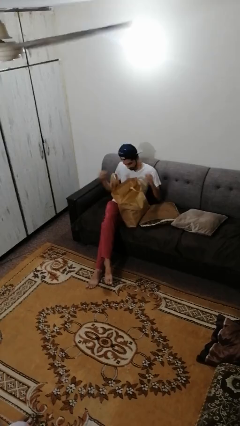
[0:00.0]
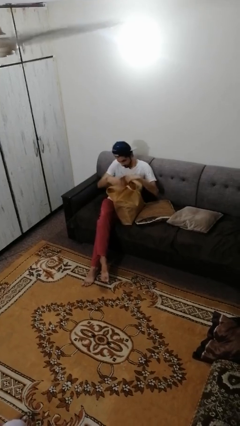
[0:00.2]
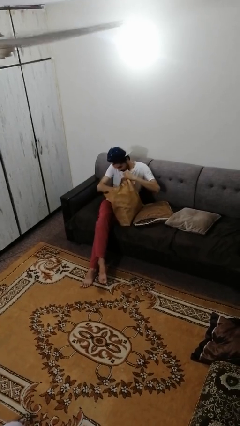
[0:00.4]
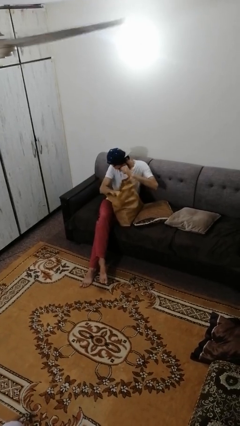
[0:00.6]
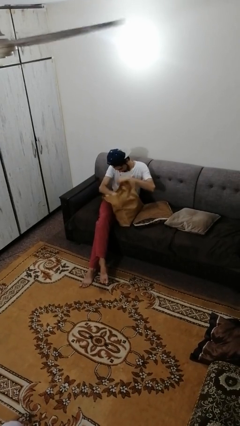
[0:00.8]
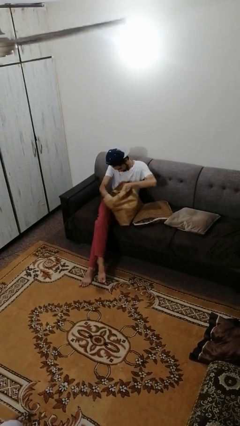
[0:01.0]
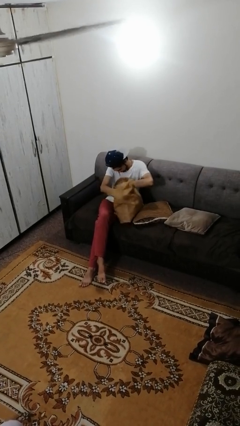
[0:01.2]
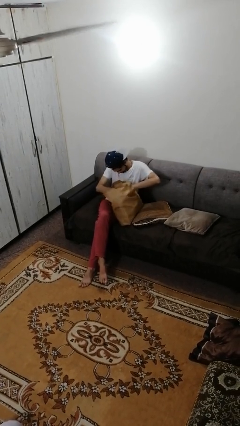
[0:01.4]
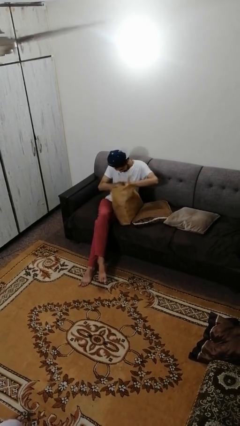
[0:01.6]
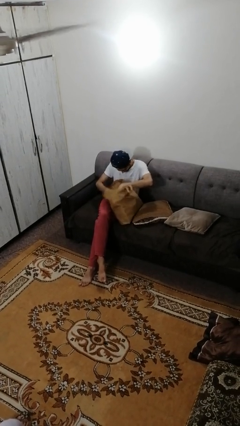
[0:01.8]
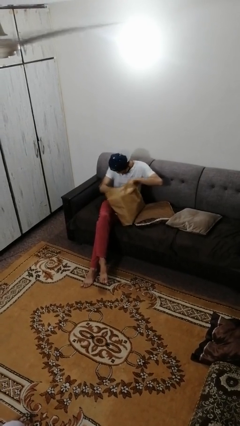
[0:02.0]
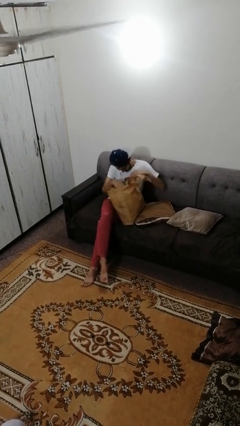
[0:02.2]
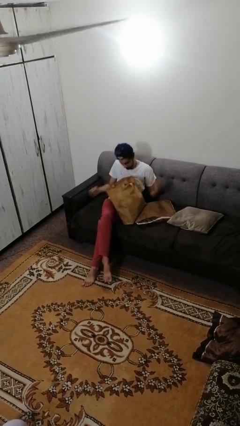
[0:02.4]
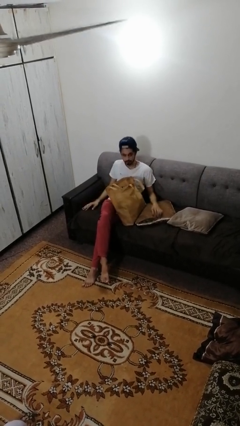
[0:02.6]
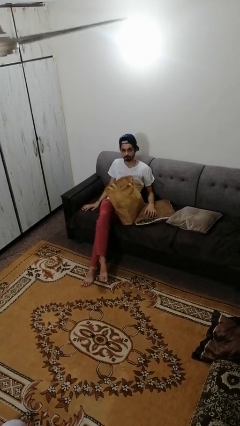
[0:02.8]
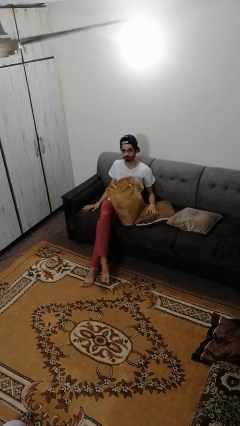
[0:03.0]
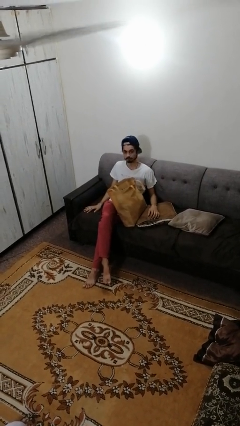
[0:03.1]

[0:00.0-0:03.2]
person searches in bag

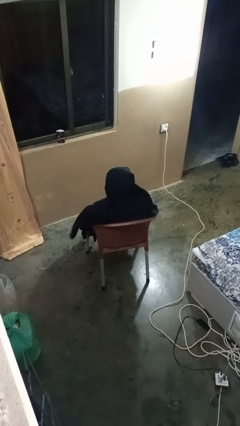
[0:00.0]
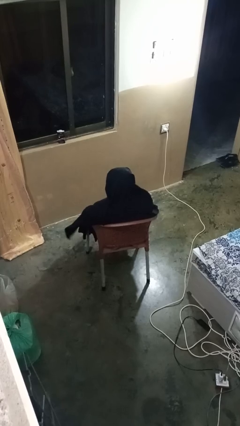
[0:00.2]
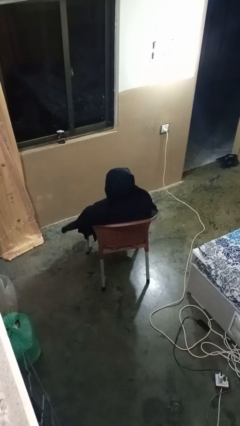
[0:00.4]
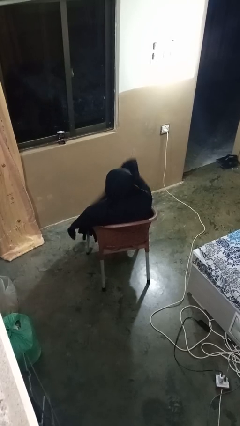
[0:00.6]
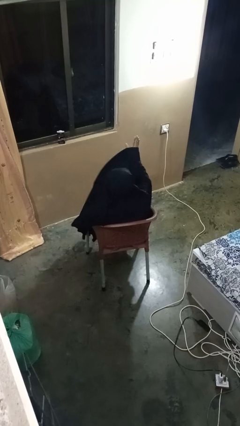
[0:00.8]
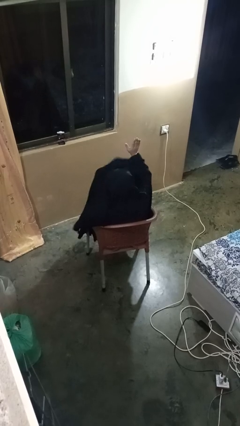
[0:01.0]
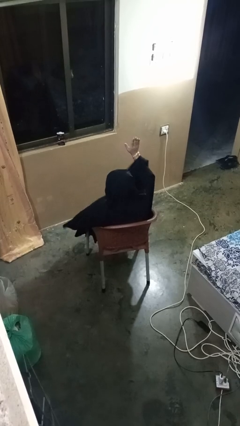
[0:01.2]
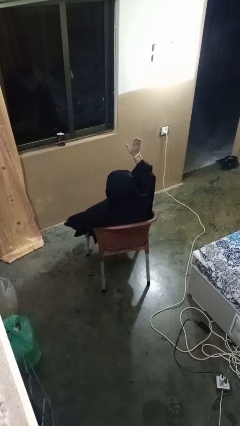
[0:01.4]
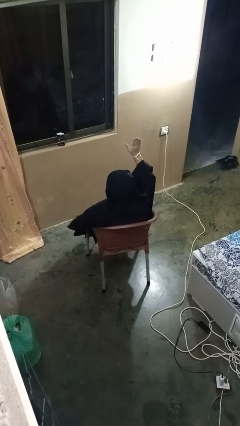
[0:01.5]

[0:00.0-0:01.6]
person gestures raise hand

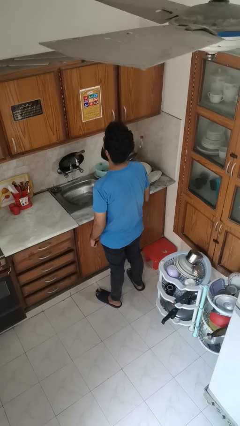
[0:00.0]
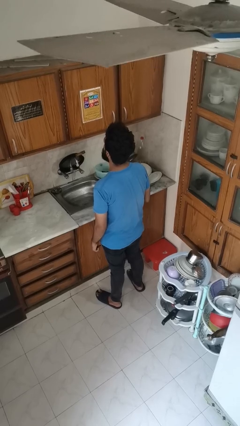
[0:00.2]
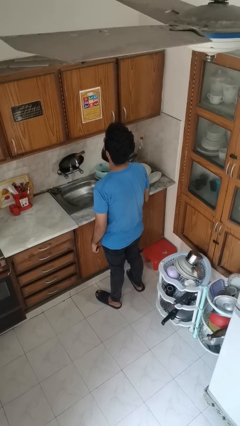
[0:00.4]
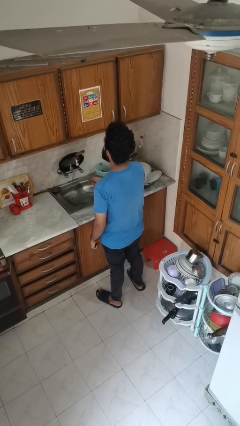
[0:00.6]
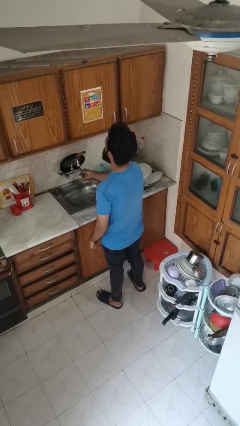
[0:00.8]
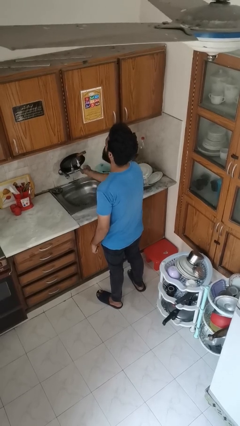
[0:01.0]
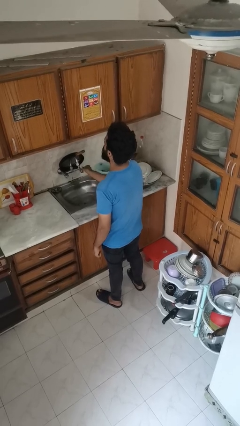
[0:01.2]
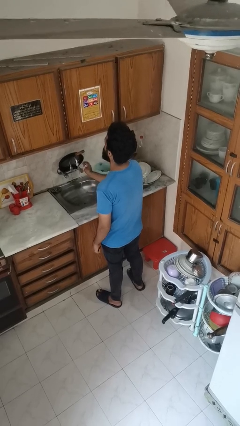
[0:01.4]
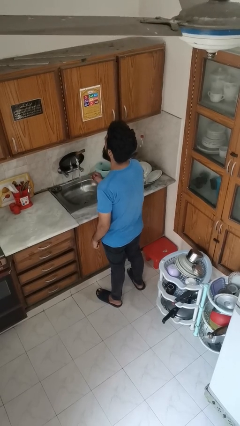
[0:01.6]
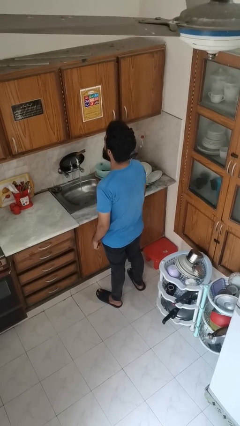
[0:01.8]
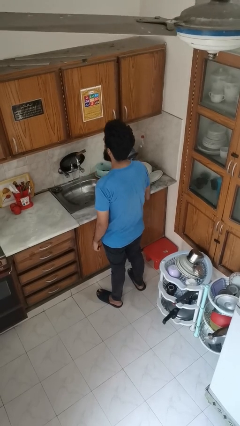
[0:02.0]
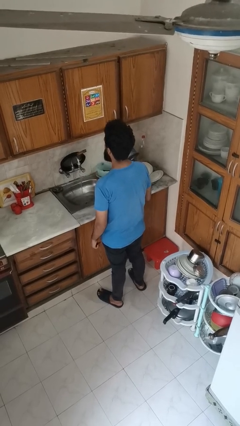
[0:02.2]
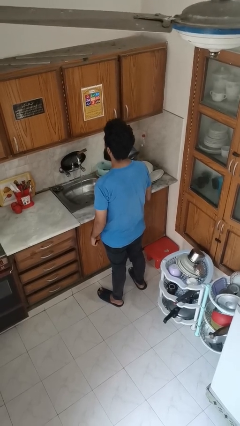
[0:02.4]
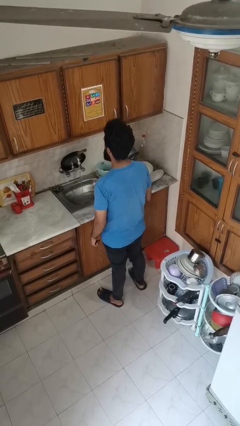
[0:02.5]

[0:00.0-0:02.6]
person turns on faucet

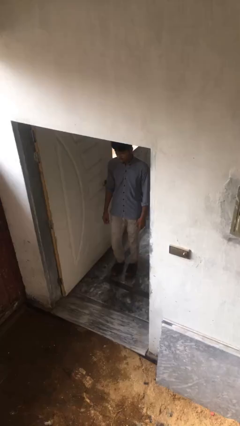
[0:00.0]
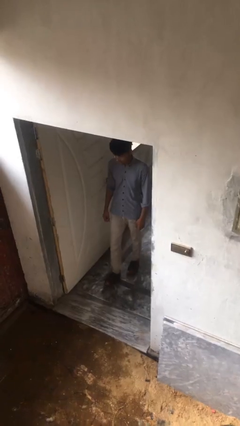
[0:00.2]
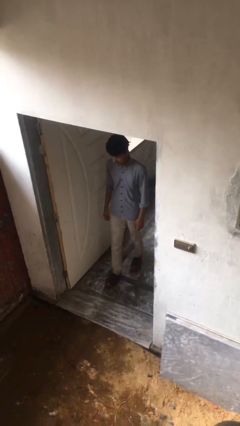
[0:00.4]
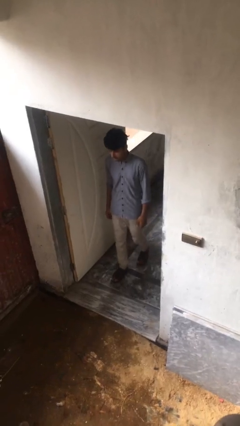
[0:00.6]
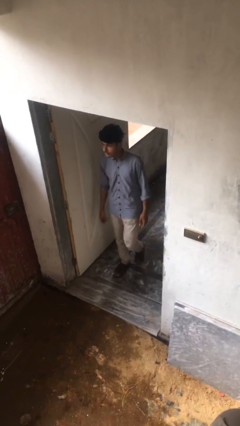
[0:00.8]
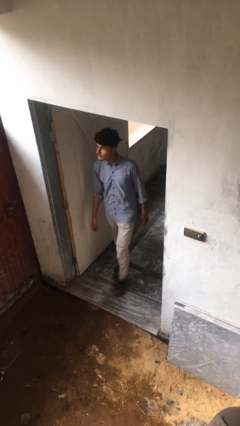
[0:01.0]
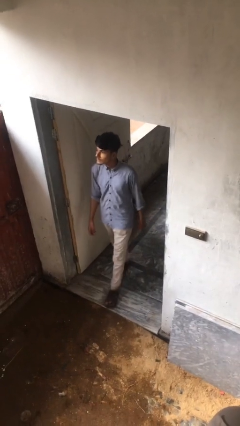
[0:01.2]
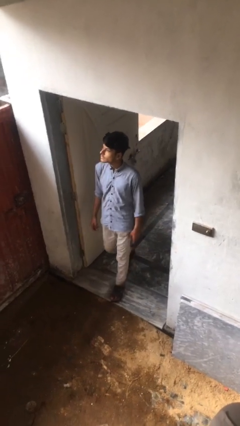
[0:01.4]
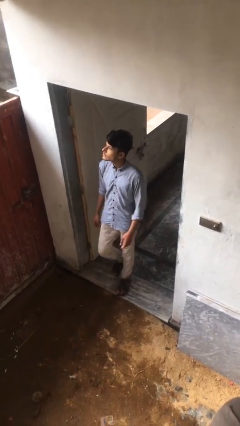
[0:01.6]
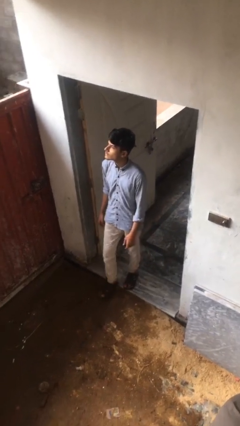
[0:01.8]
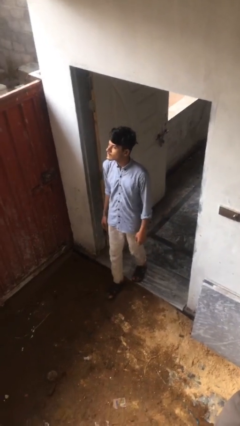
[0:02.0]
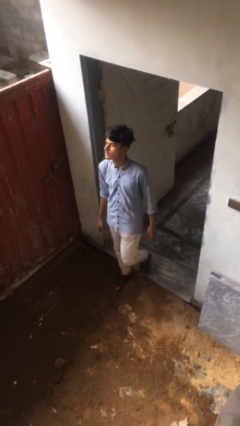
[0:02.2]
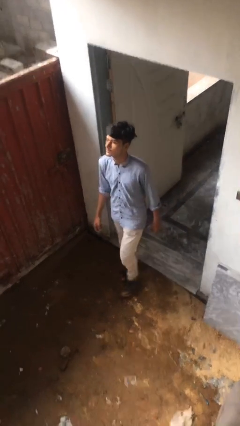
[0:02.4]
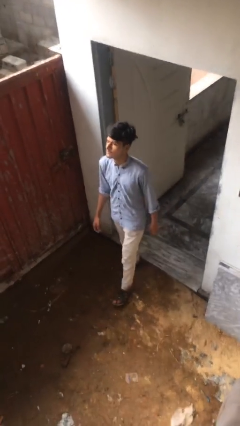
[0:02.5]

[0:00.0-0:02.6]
person enters scene through structure

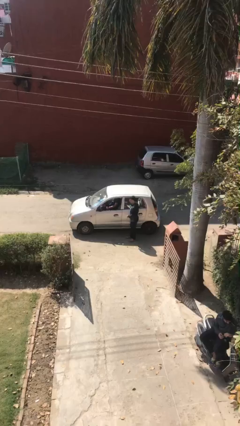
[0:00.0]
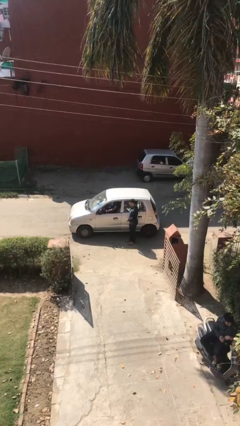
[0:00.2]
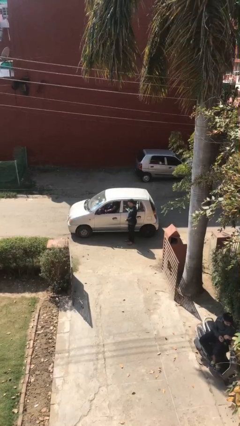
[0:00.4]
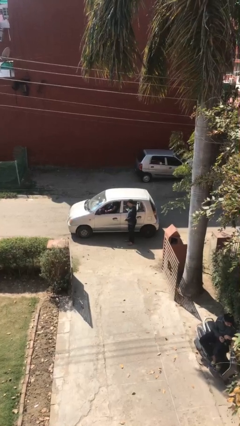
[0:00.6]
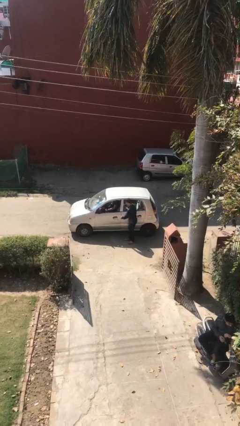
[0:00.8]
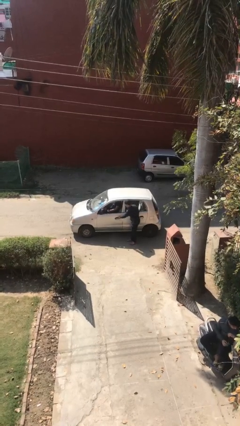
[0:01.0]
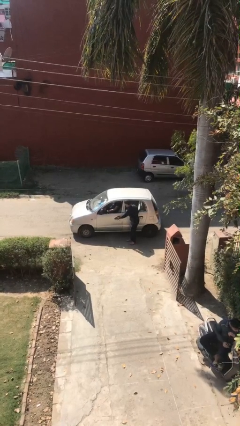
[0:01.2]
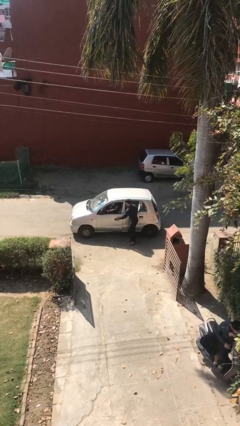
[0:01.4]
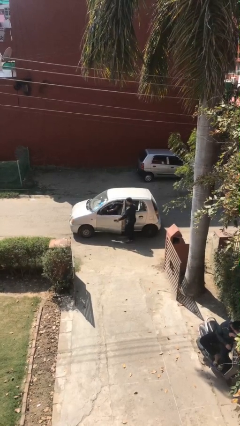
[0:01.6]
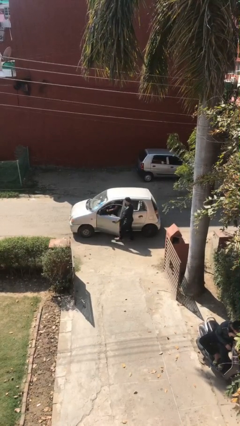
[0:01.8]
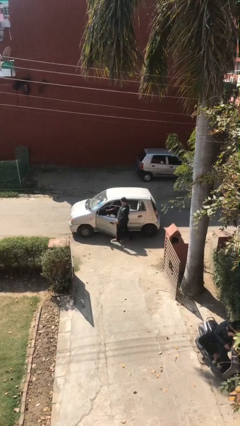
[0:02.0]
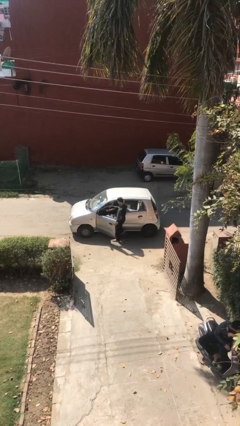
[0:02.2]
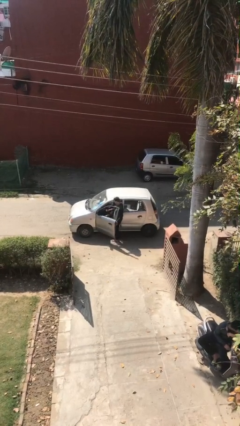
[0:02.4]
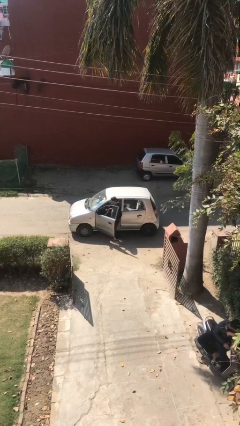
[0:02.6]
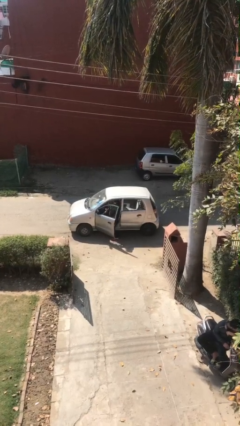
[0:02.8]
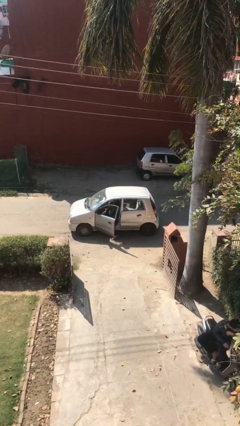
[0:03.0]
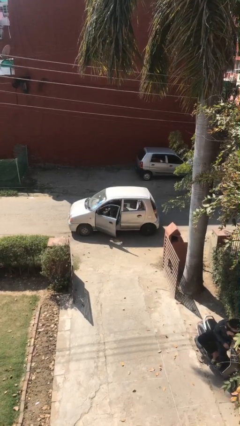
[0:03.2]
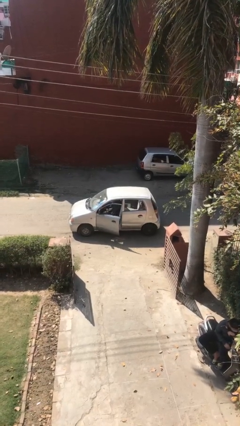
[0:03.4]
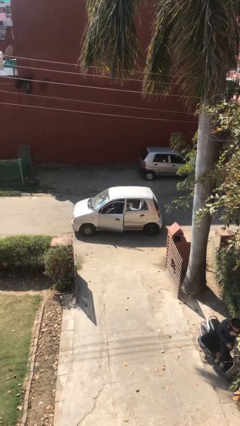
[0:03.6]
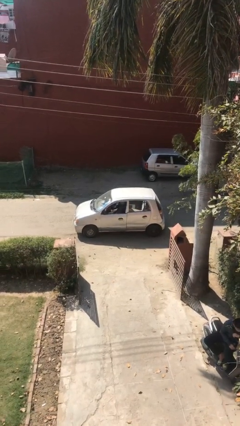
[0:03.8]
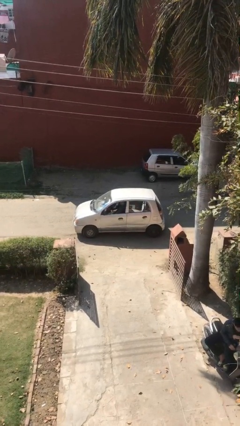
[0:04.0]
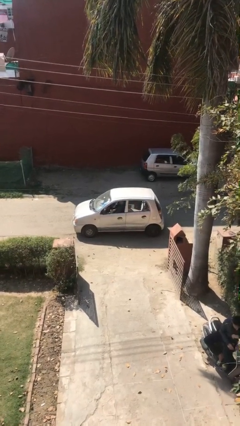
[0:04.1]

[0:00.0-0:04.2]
car picks up person

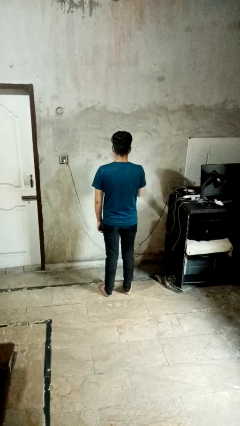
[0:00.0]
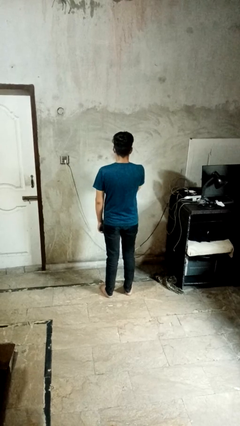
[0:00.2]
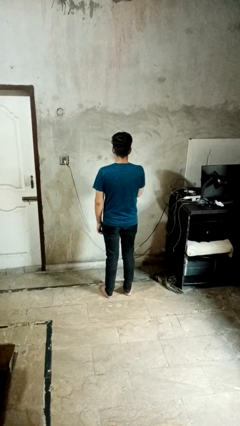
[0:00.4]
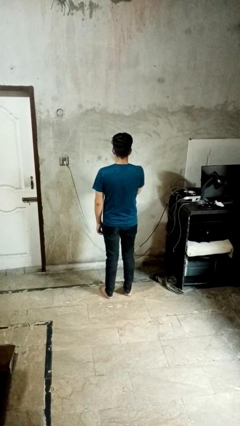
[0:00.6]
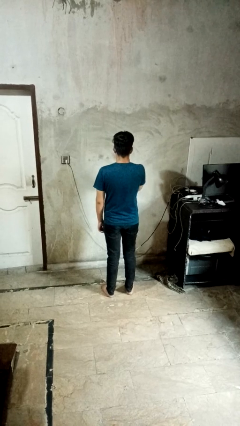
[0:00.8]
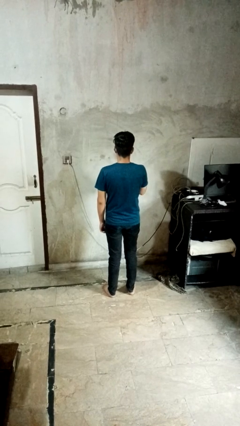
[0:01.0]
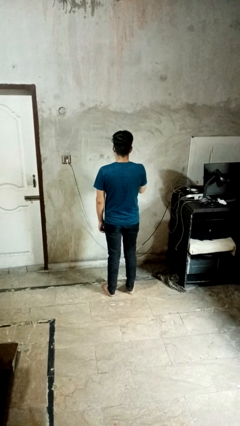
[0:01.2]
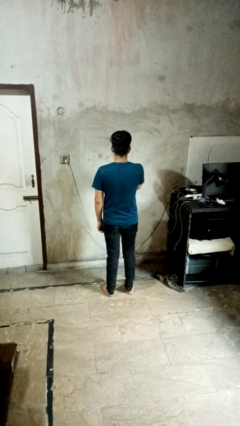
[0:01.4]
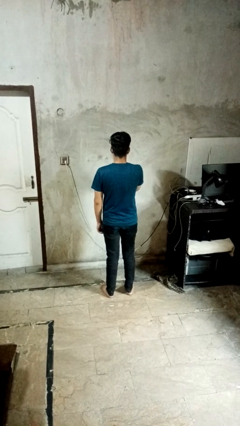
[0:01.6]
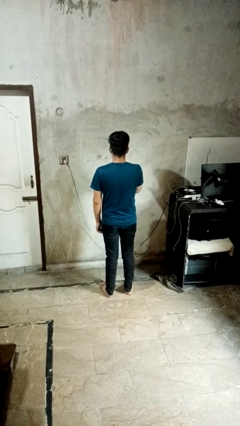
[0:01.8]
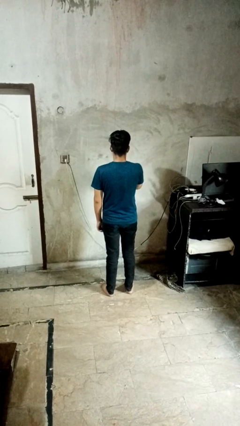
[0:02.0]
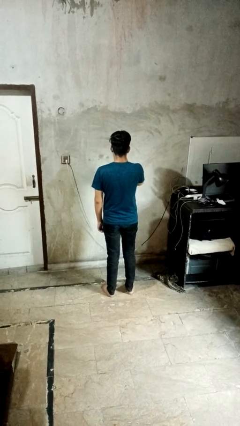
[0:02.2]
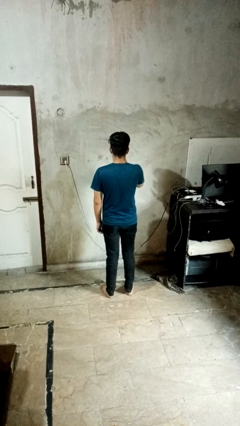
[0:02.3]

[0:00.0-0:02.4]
person licks fingers

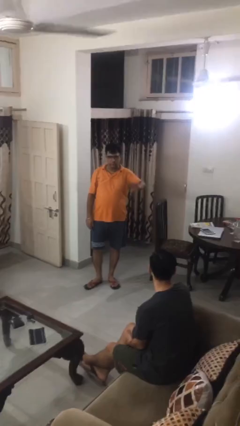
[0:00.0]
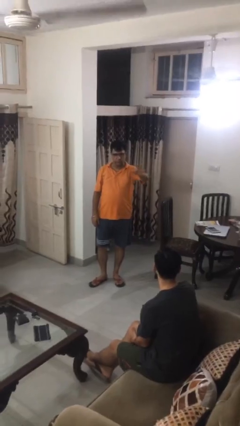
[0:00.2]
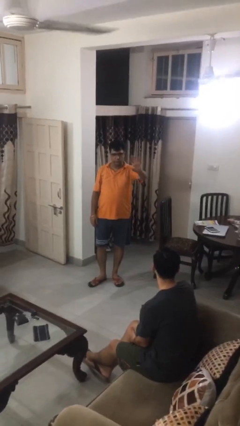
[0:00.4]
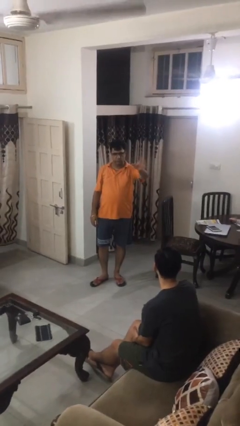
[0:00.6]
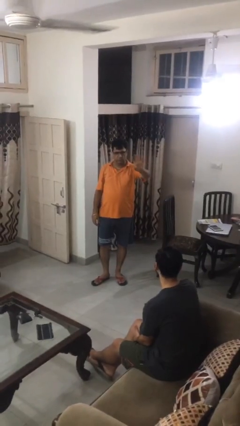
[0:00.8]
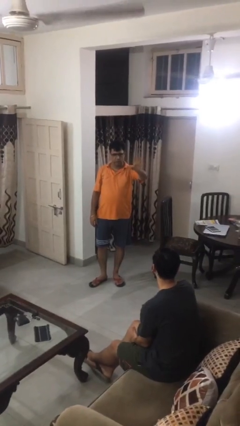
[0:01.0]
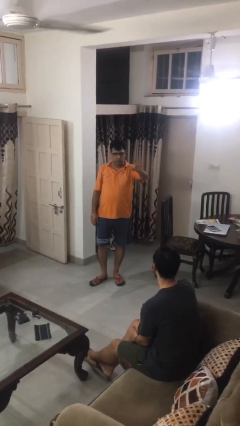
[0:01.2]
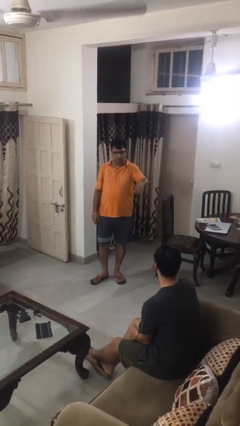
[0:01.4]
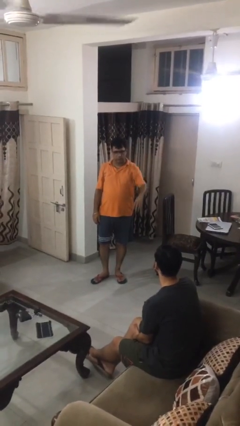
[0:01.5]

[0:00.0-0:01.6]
person waves at person
